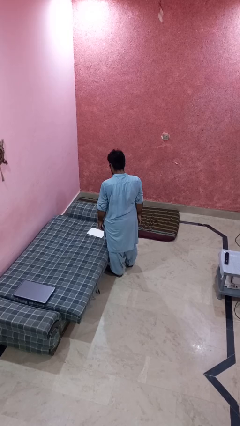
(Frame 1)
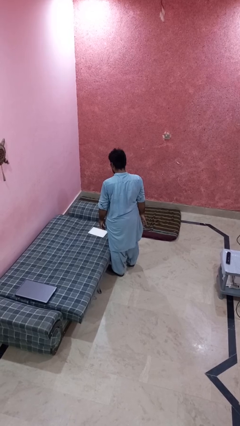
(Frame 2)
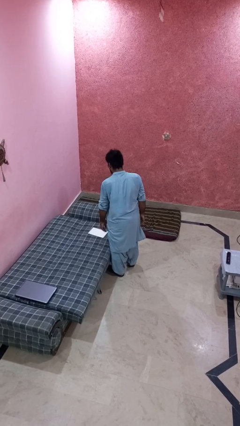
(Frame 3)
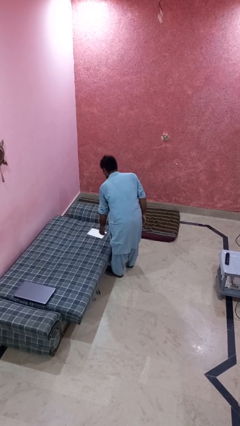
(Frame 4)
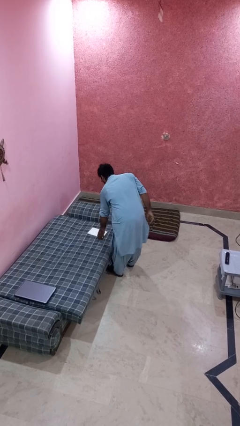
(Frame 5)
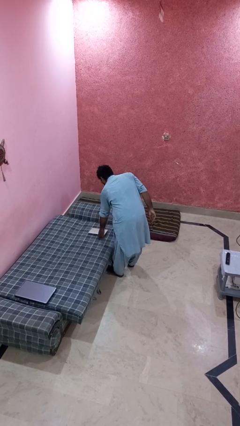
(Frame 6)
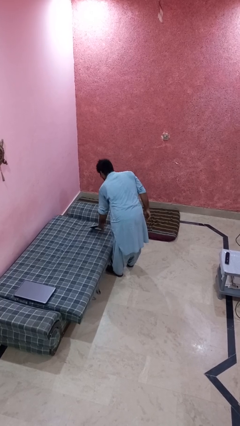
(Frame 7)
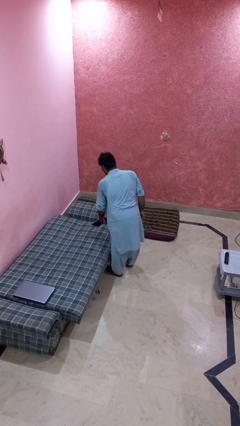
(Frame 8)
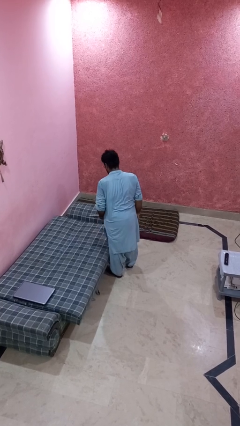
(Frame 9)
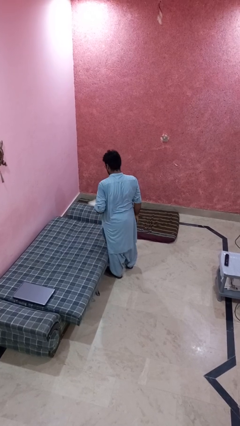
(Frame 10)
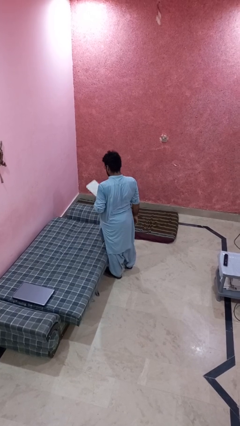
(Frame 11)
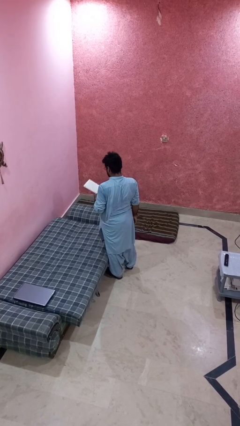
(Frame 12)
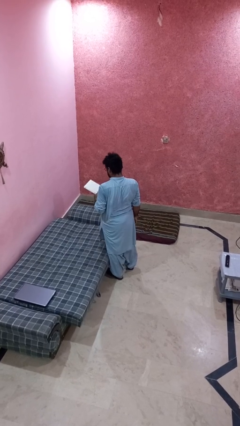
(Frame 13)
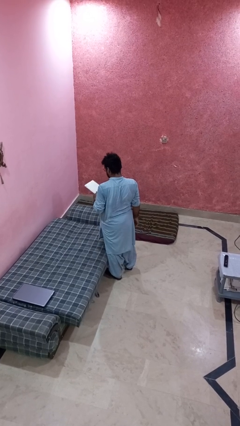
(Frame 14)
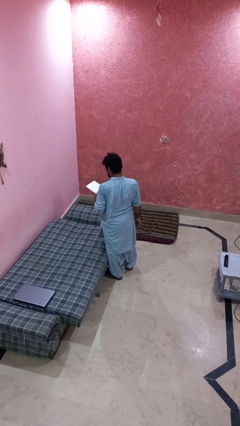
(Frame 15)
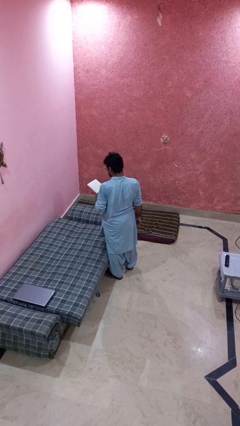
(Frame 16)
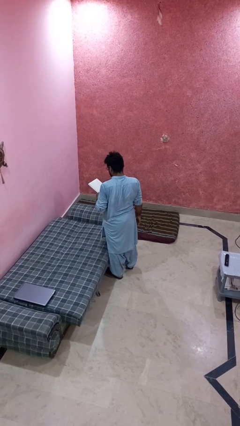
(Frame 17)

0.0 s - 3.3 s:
person picks up object from bed

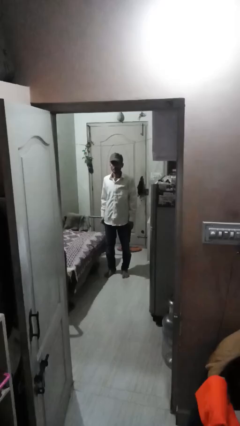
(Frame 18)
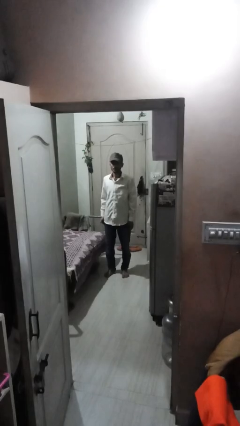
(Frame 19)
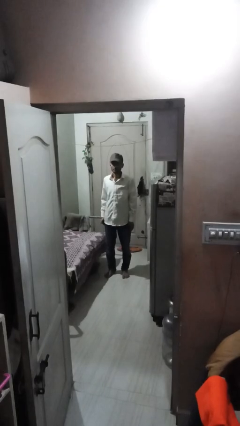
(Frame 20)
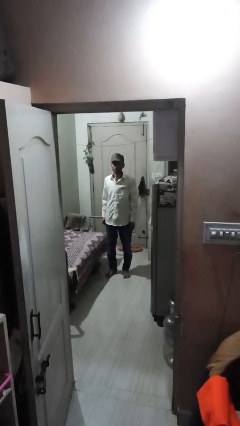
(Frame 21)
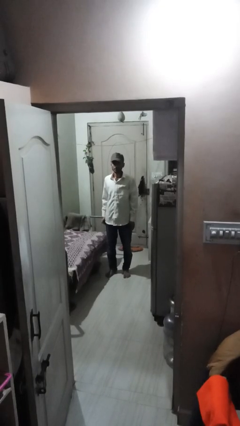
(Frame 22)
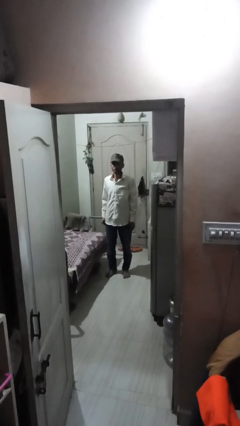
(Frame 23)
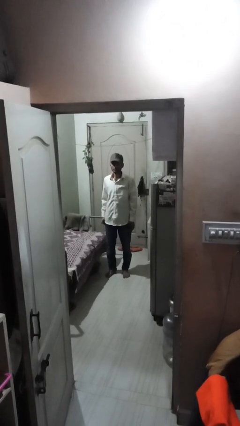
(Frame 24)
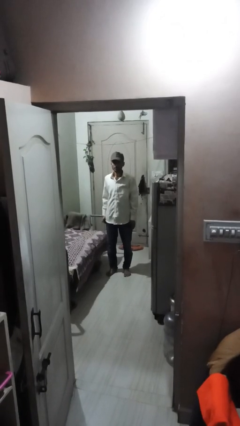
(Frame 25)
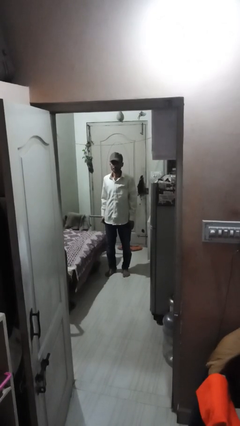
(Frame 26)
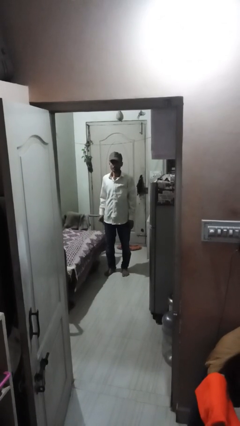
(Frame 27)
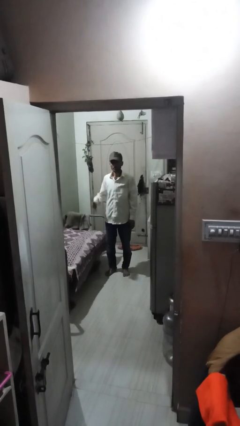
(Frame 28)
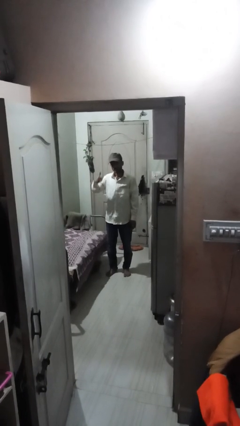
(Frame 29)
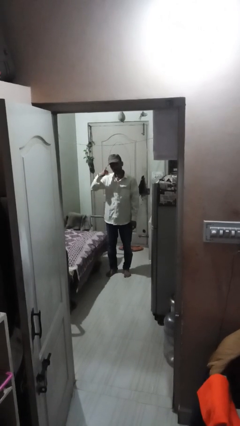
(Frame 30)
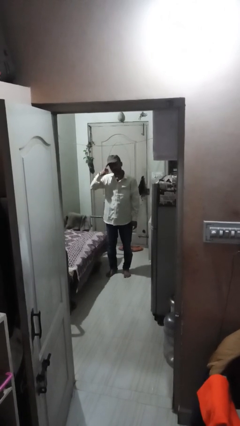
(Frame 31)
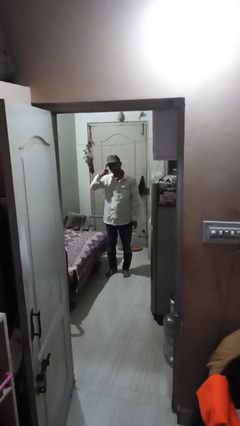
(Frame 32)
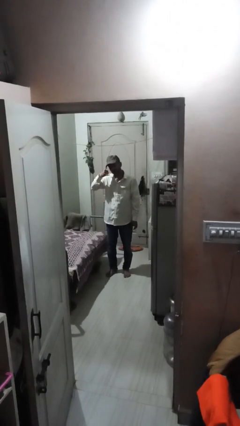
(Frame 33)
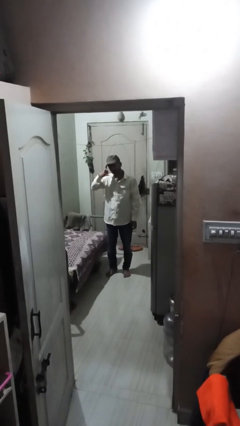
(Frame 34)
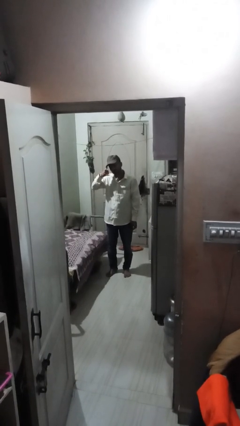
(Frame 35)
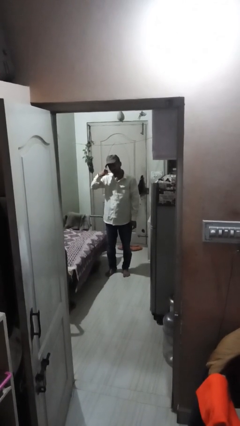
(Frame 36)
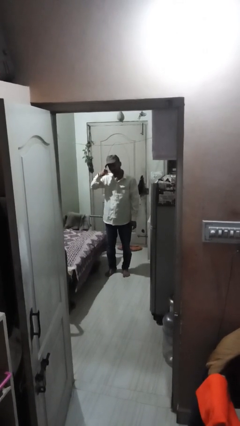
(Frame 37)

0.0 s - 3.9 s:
person gestures call me

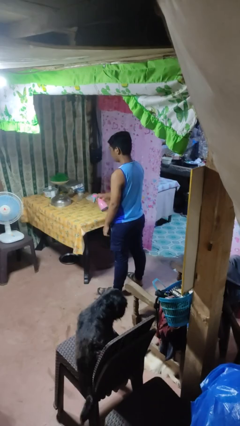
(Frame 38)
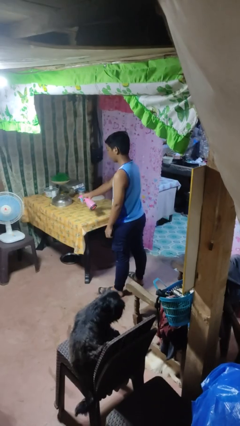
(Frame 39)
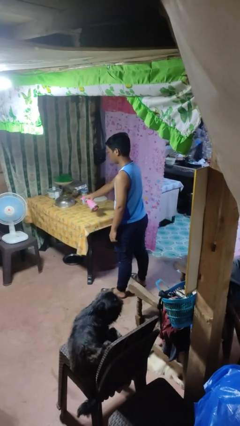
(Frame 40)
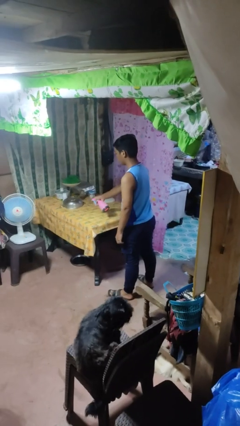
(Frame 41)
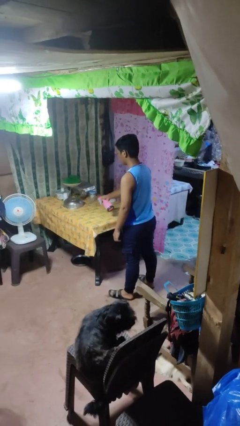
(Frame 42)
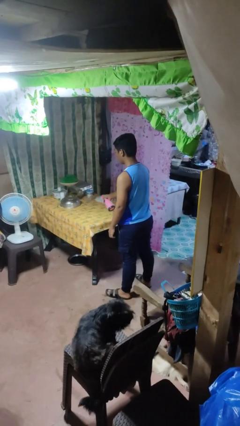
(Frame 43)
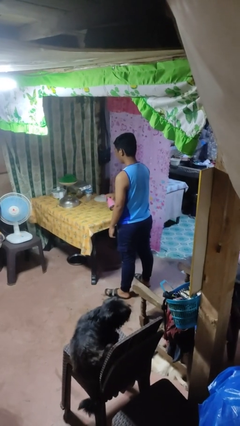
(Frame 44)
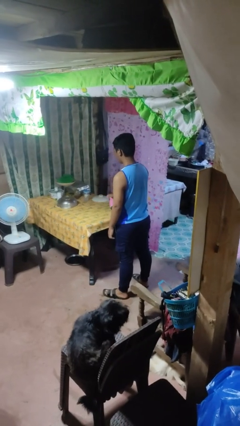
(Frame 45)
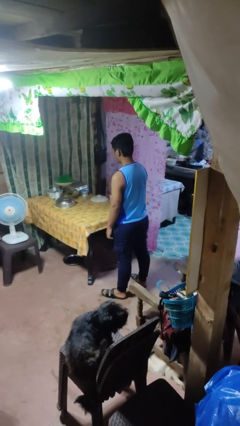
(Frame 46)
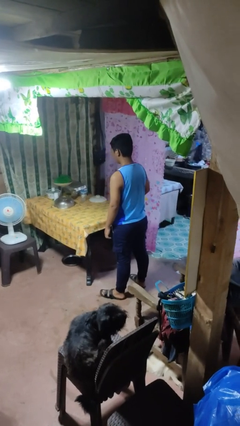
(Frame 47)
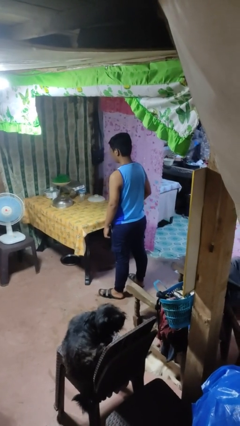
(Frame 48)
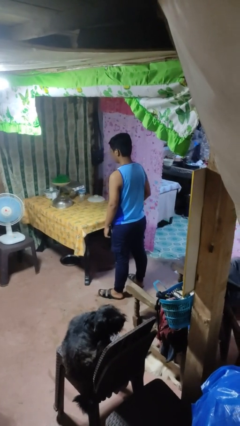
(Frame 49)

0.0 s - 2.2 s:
person sprays from bottle

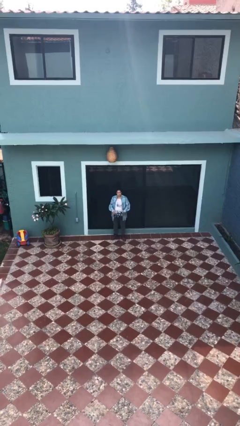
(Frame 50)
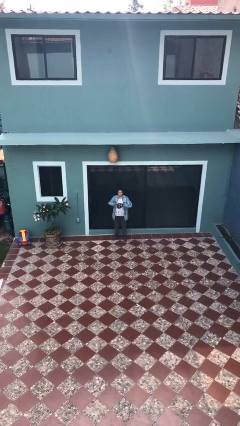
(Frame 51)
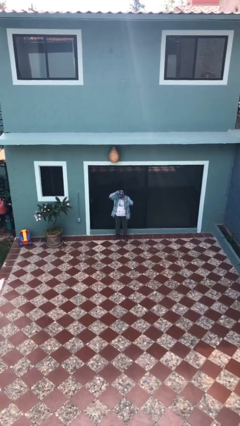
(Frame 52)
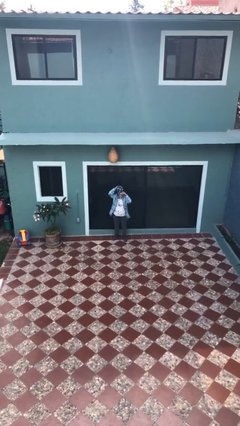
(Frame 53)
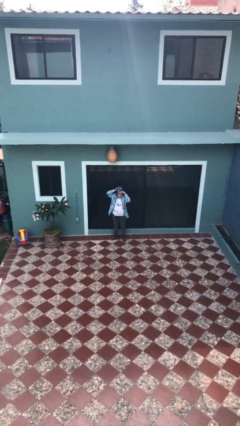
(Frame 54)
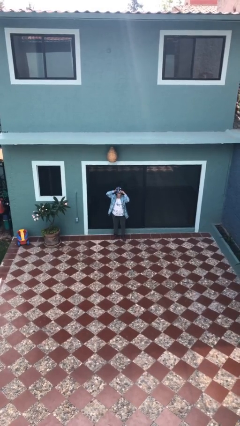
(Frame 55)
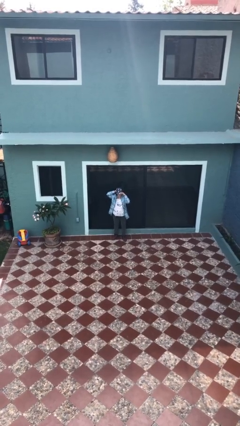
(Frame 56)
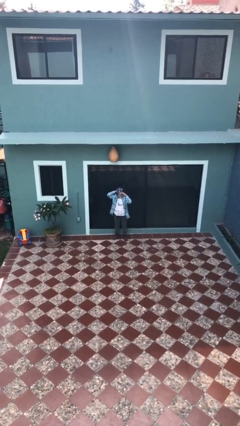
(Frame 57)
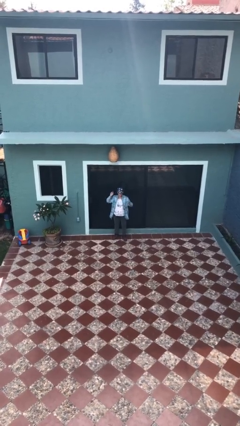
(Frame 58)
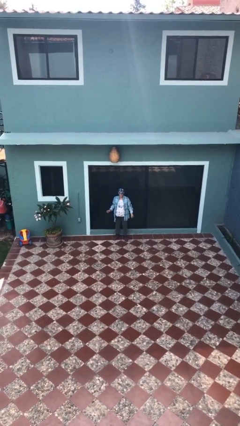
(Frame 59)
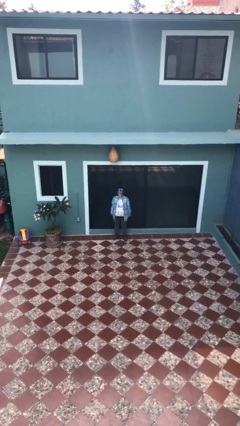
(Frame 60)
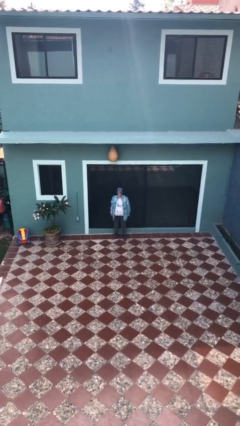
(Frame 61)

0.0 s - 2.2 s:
person puts on hat

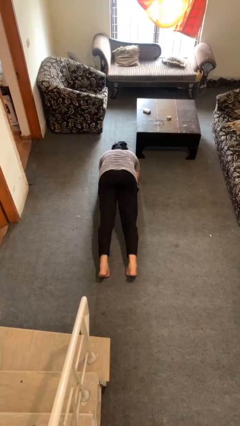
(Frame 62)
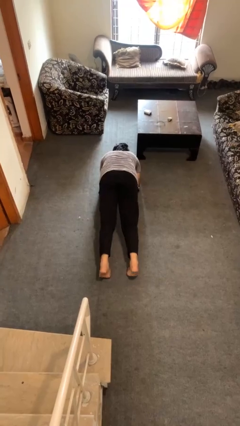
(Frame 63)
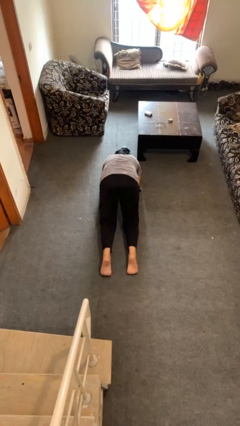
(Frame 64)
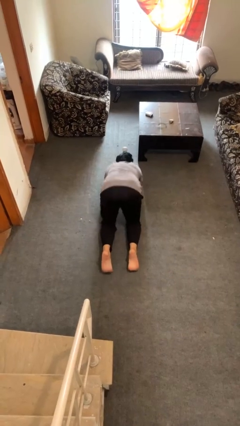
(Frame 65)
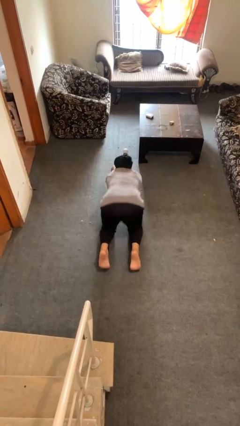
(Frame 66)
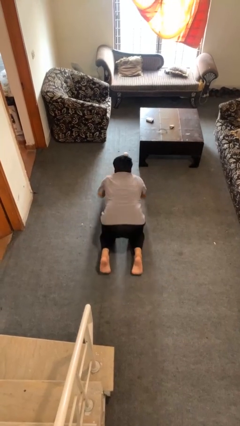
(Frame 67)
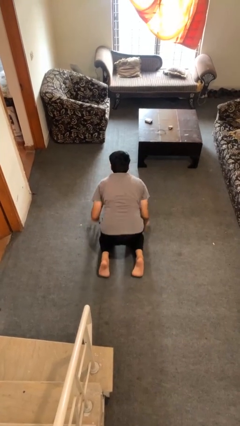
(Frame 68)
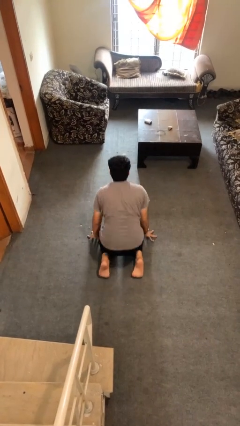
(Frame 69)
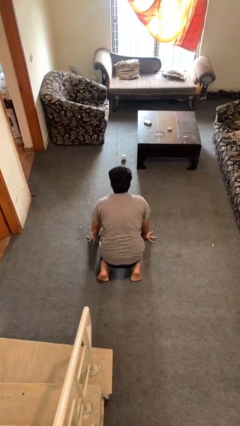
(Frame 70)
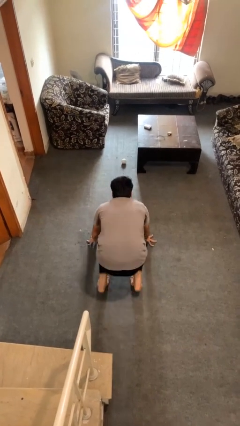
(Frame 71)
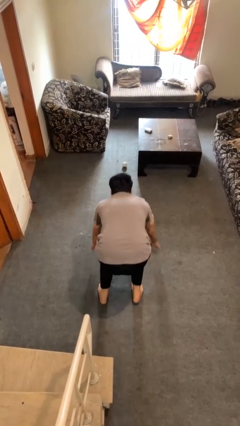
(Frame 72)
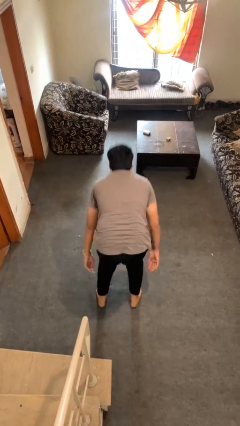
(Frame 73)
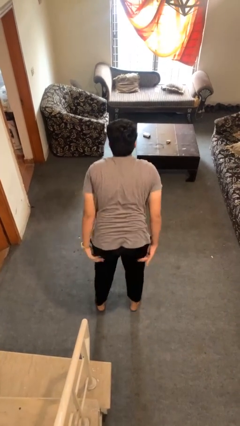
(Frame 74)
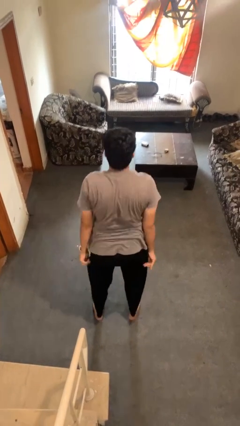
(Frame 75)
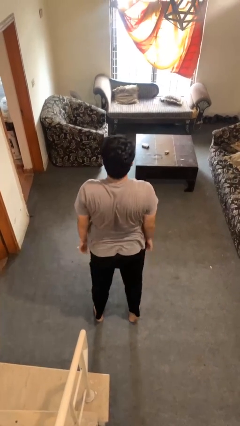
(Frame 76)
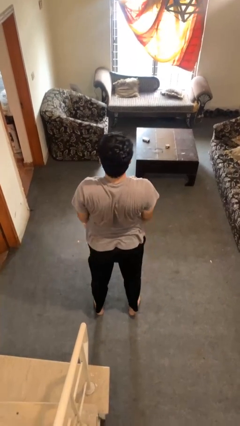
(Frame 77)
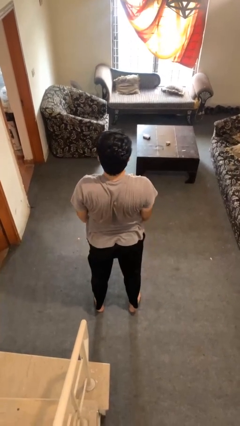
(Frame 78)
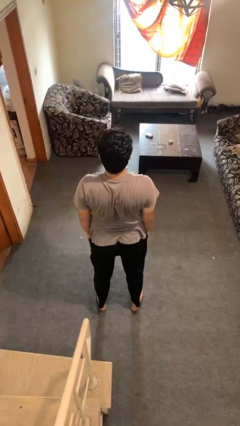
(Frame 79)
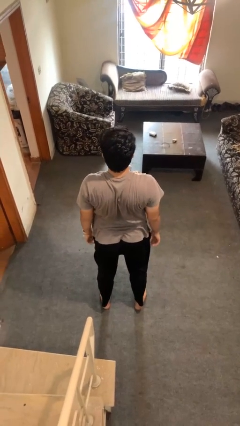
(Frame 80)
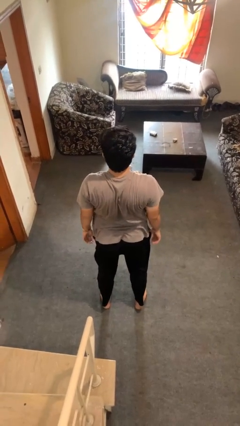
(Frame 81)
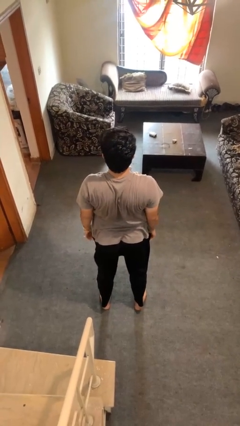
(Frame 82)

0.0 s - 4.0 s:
person stands up from floor

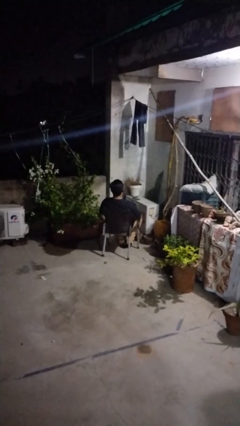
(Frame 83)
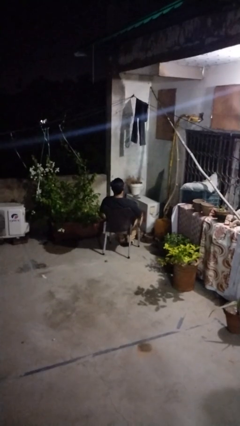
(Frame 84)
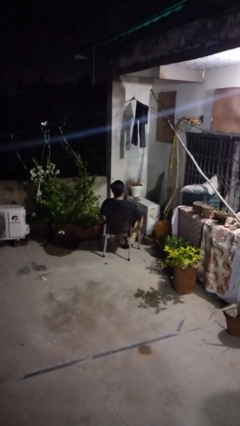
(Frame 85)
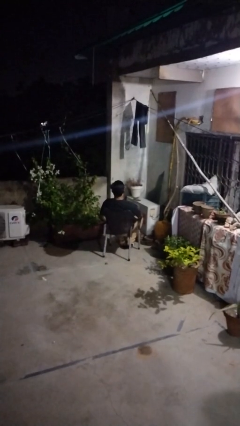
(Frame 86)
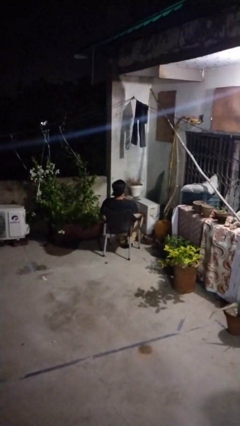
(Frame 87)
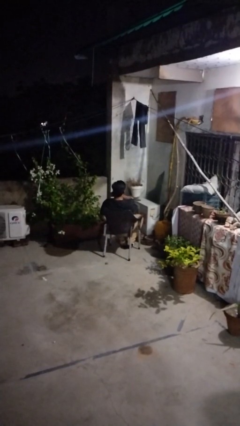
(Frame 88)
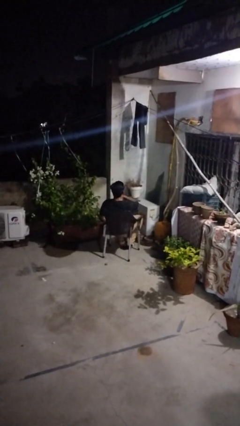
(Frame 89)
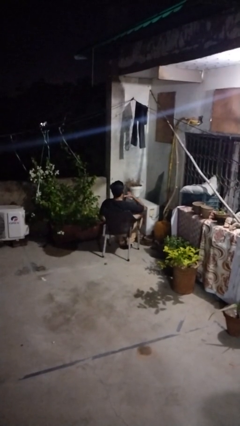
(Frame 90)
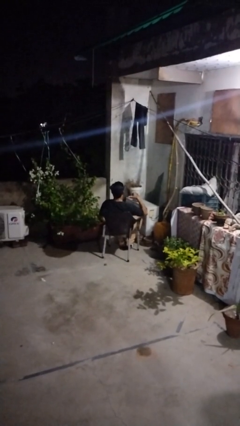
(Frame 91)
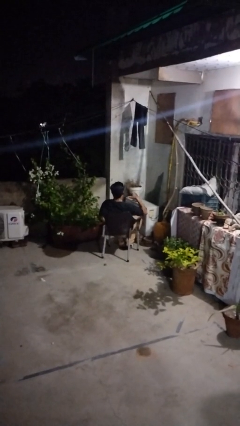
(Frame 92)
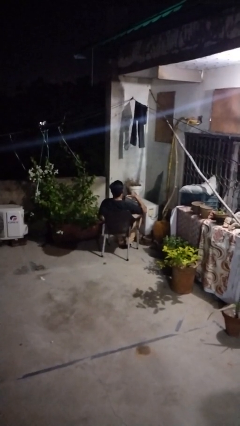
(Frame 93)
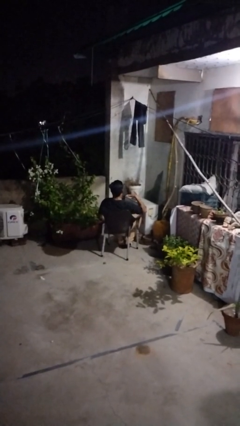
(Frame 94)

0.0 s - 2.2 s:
person gestures cut
